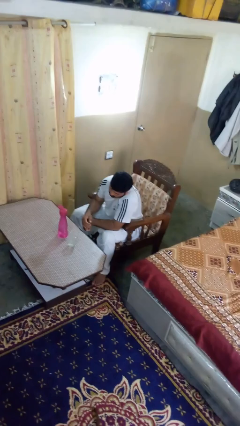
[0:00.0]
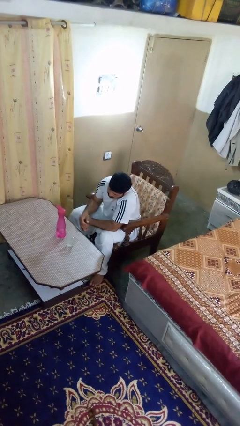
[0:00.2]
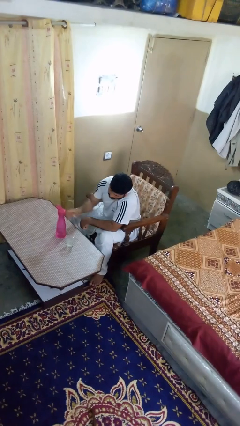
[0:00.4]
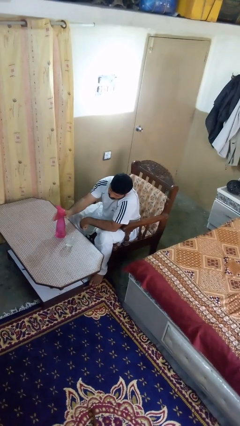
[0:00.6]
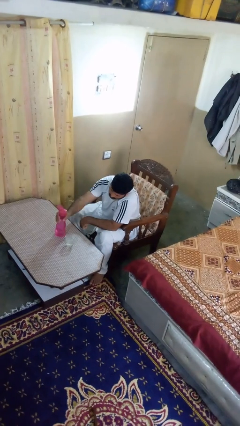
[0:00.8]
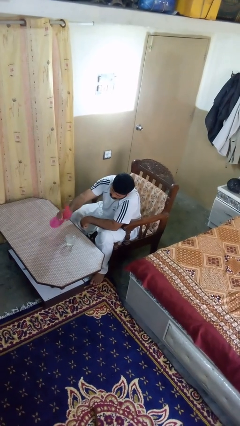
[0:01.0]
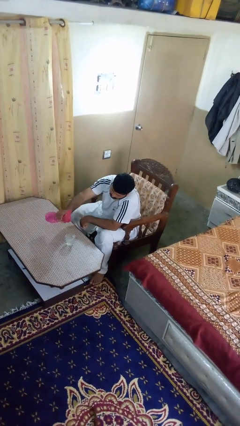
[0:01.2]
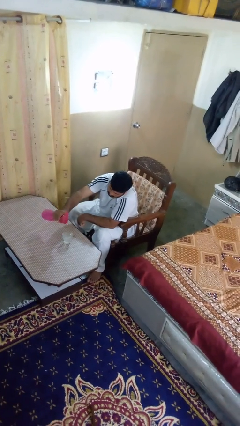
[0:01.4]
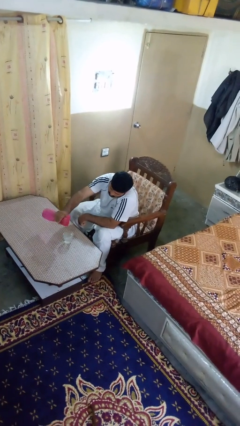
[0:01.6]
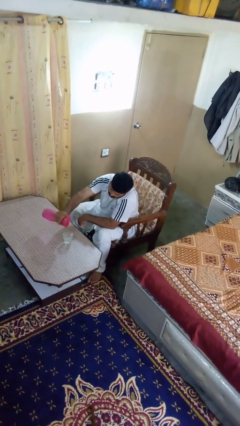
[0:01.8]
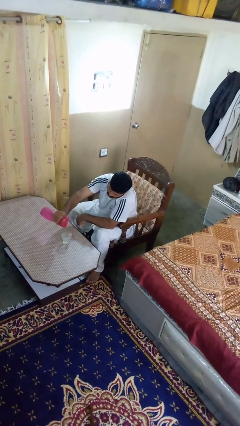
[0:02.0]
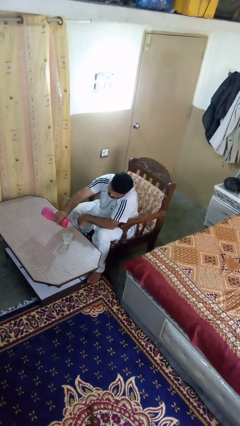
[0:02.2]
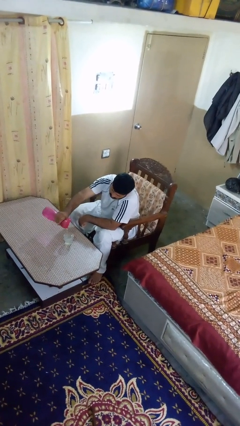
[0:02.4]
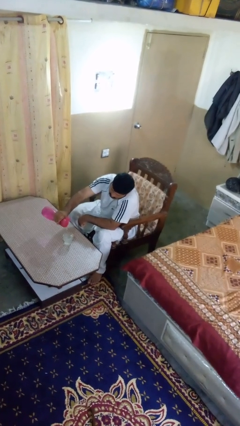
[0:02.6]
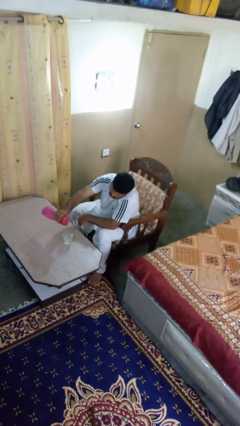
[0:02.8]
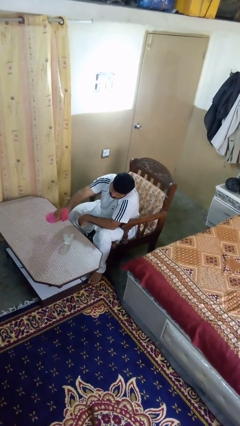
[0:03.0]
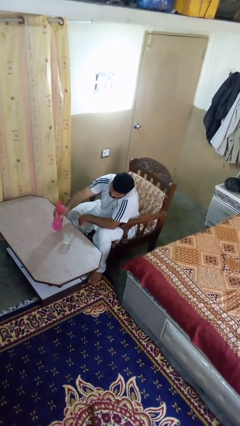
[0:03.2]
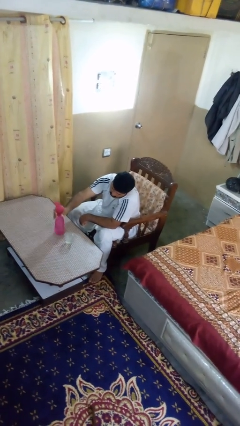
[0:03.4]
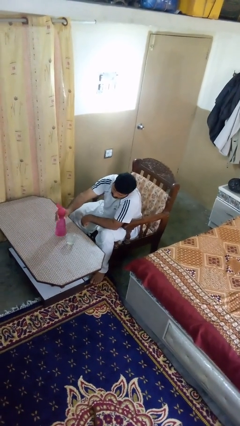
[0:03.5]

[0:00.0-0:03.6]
person pours liquid into cup

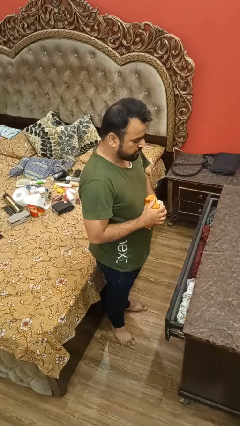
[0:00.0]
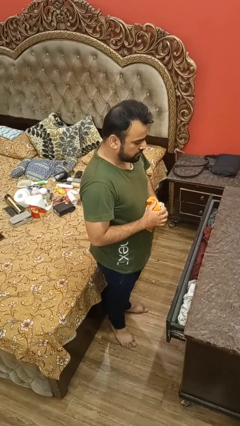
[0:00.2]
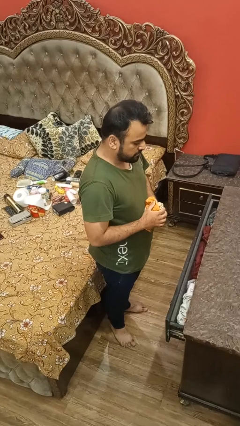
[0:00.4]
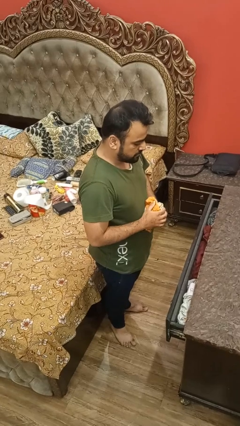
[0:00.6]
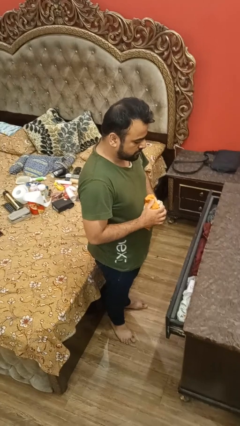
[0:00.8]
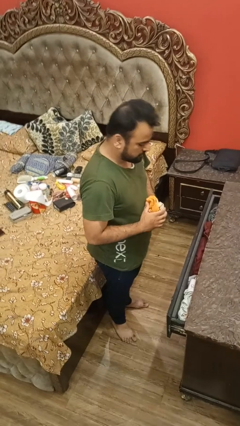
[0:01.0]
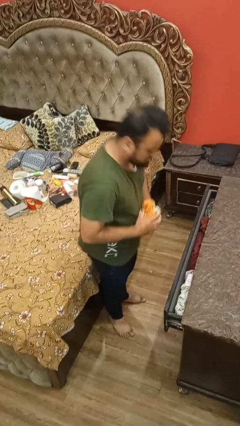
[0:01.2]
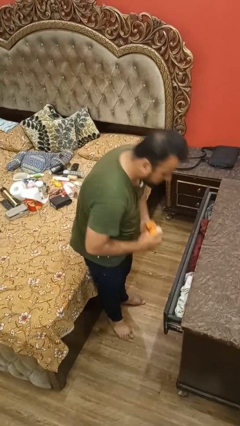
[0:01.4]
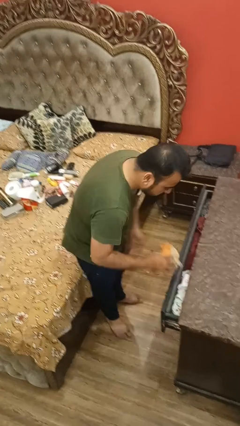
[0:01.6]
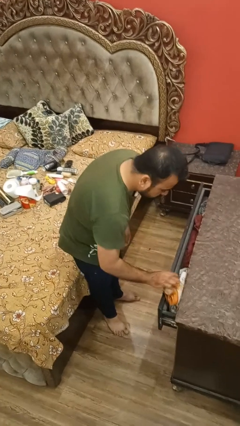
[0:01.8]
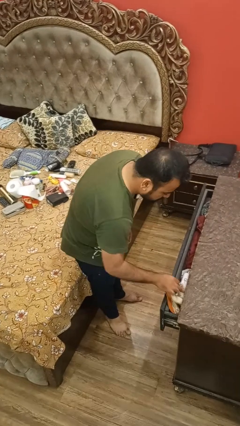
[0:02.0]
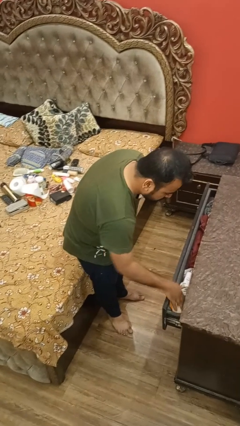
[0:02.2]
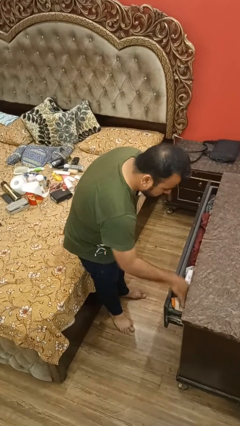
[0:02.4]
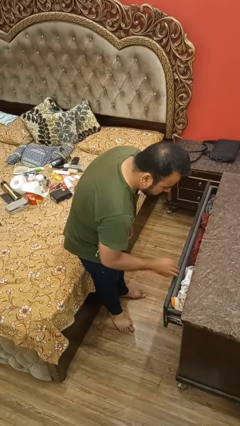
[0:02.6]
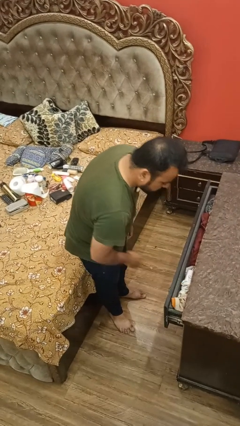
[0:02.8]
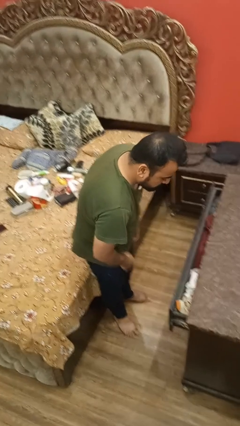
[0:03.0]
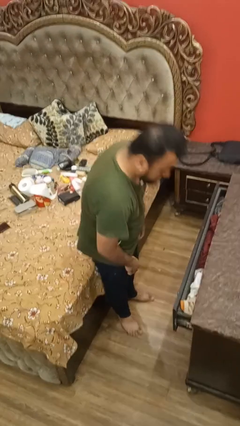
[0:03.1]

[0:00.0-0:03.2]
person puts clothes into dresser

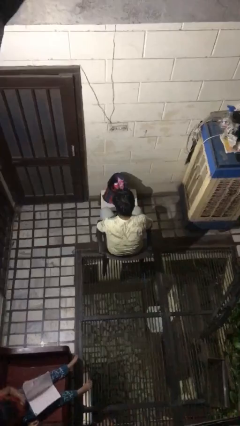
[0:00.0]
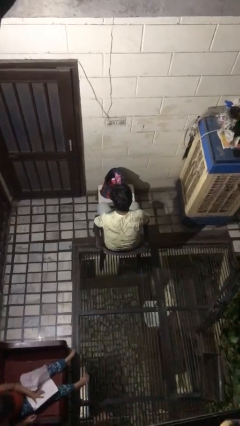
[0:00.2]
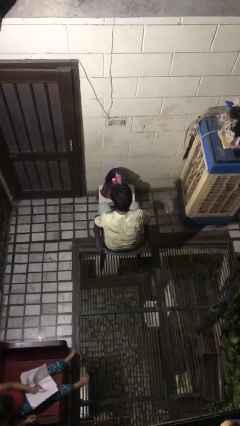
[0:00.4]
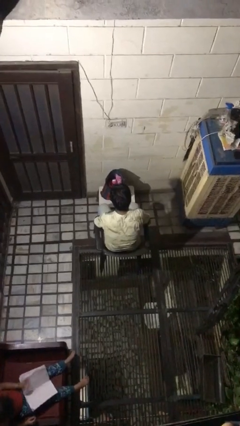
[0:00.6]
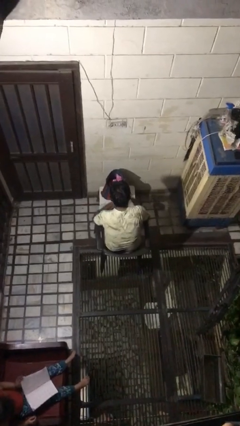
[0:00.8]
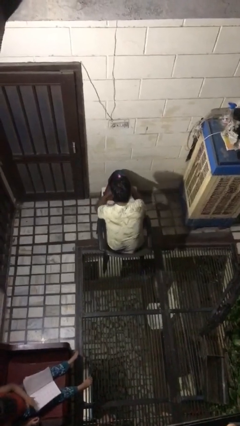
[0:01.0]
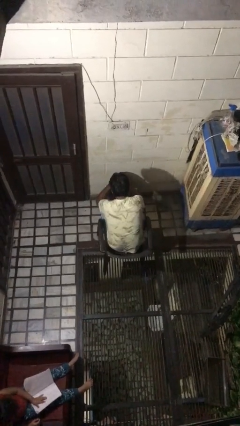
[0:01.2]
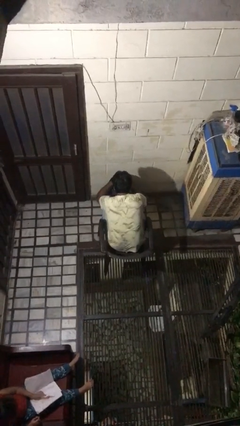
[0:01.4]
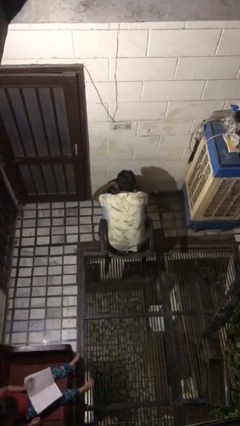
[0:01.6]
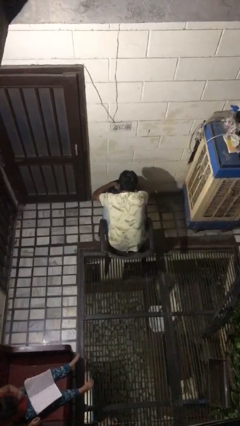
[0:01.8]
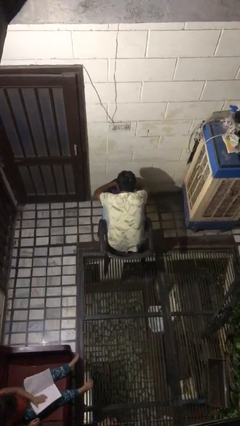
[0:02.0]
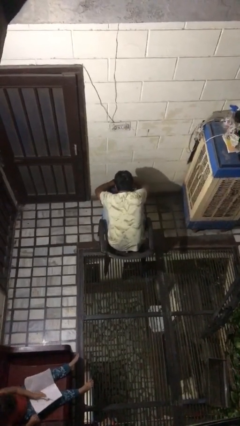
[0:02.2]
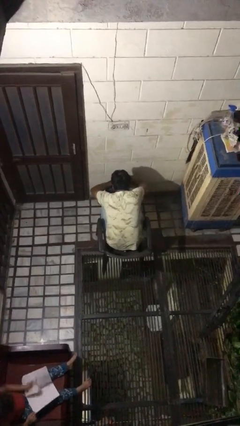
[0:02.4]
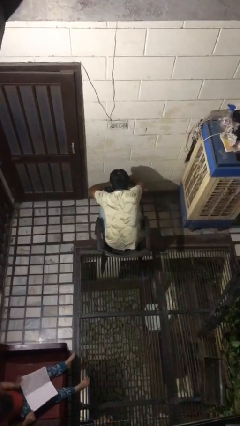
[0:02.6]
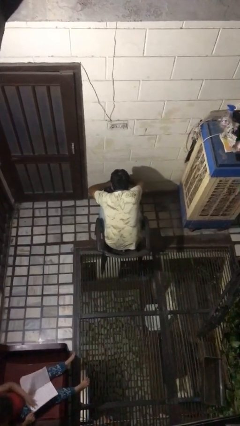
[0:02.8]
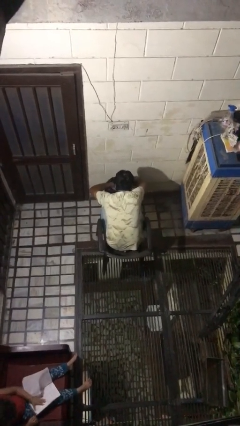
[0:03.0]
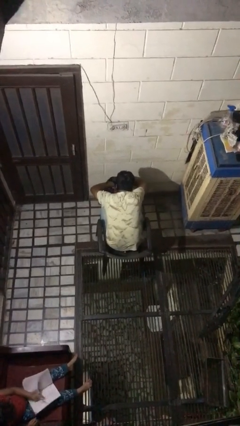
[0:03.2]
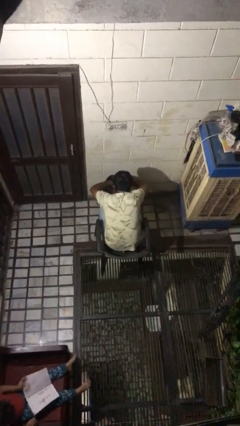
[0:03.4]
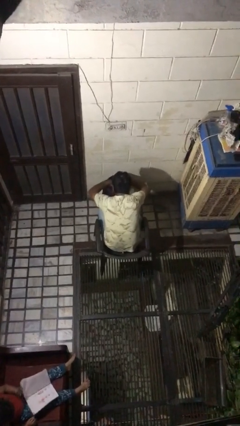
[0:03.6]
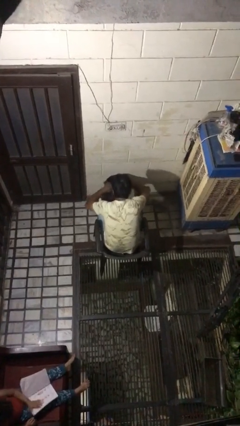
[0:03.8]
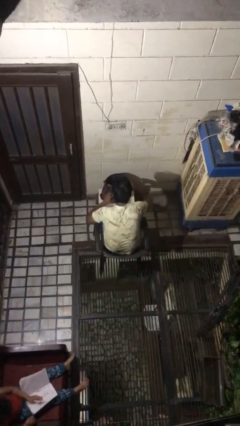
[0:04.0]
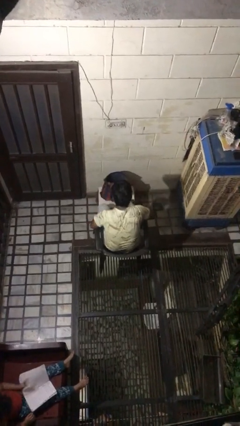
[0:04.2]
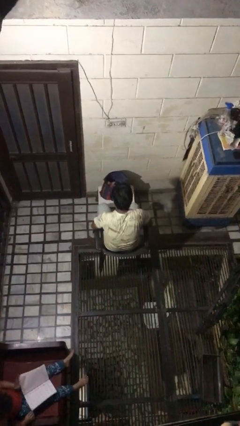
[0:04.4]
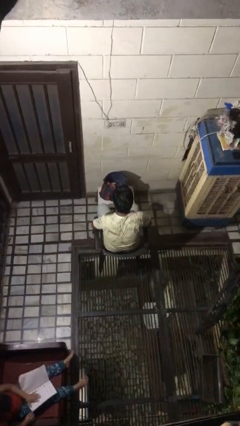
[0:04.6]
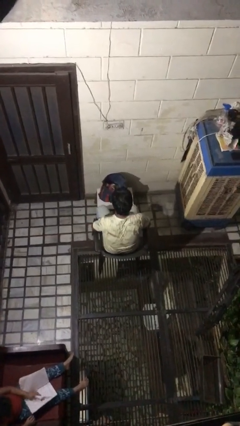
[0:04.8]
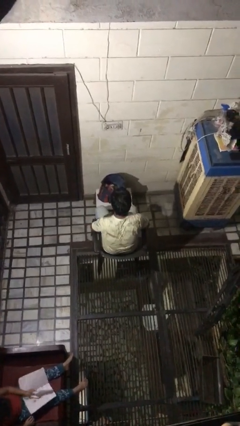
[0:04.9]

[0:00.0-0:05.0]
person searches in bag

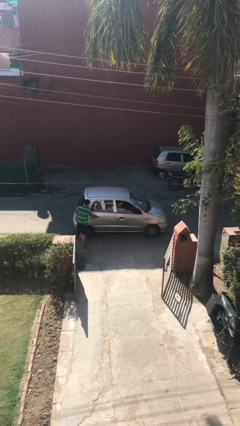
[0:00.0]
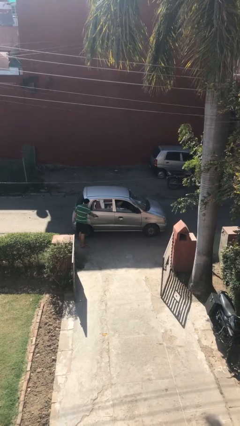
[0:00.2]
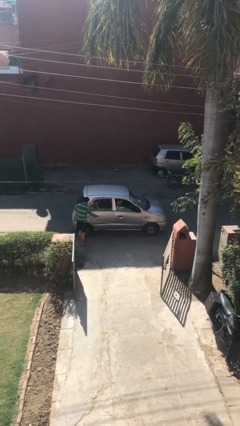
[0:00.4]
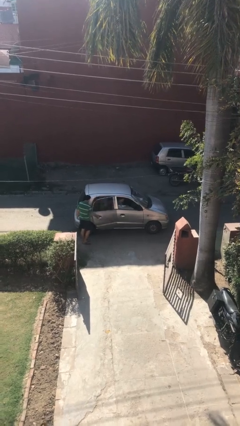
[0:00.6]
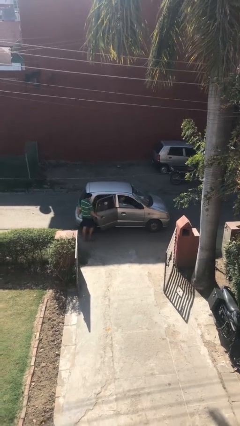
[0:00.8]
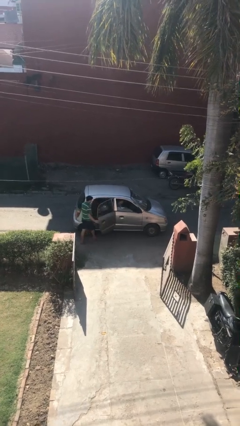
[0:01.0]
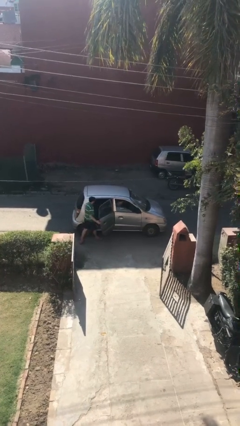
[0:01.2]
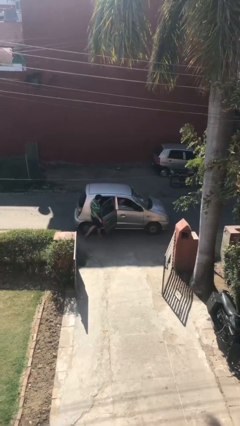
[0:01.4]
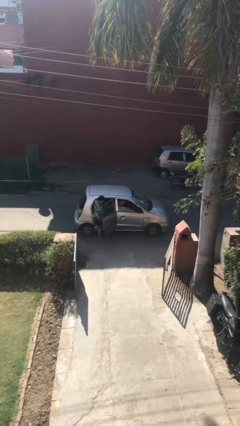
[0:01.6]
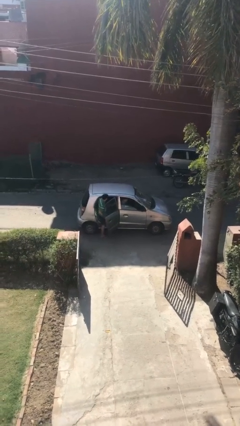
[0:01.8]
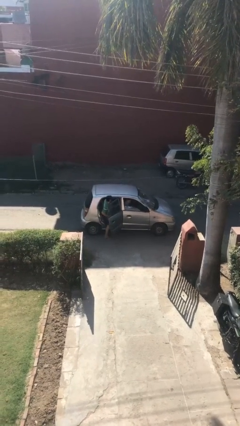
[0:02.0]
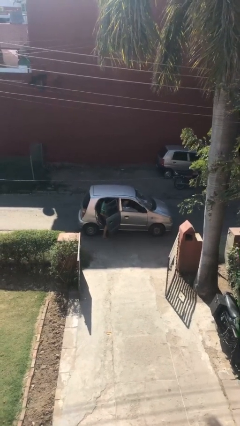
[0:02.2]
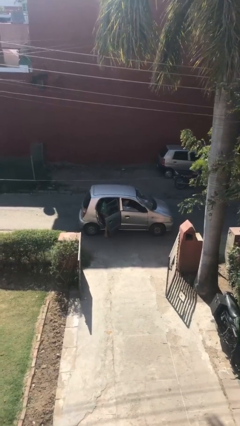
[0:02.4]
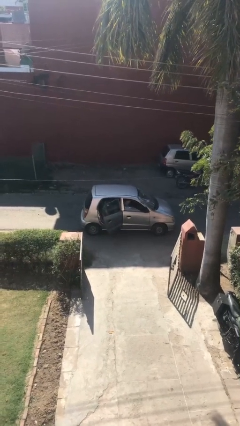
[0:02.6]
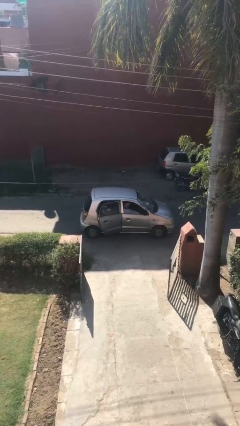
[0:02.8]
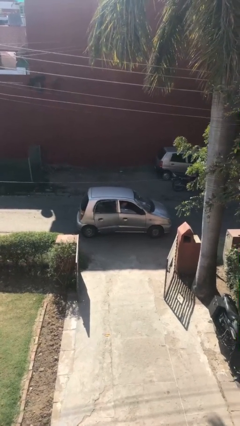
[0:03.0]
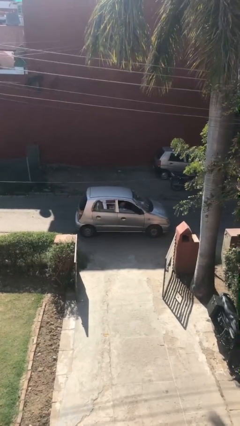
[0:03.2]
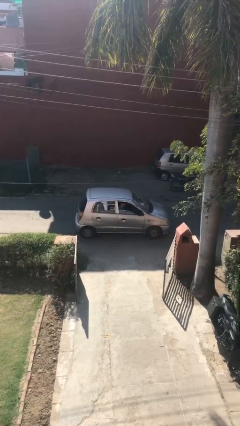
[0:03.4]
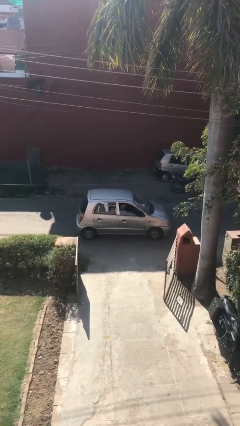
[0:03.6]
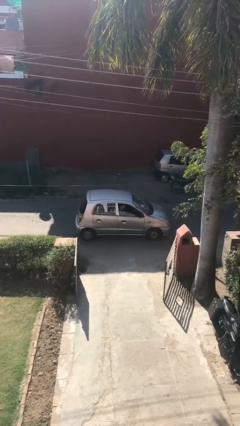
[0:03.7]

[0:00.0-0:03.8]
car picks up person

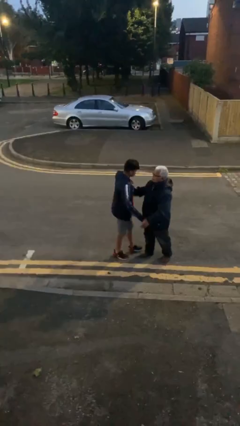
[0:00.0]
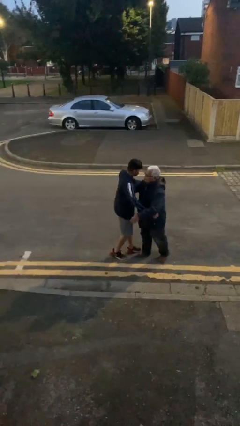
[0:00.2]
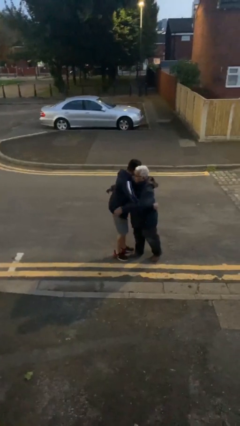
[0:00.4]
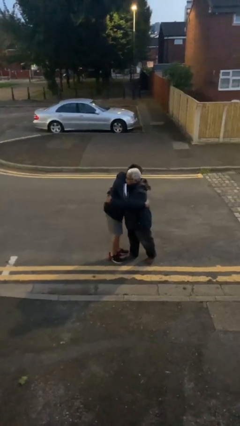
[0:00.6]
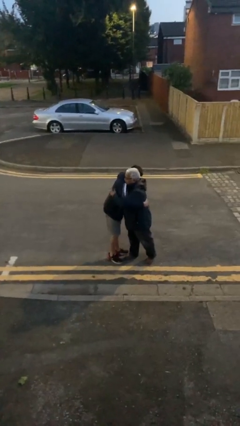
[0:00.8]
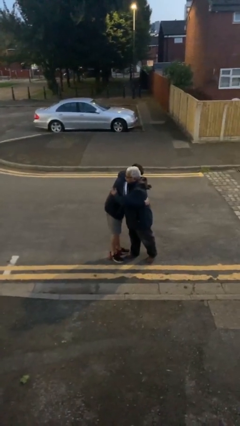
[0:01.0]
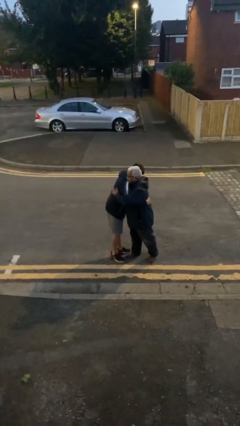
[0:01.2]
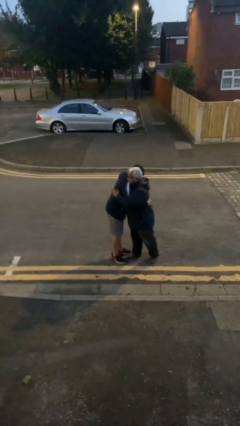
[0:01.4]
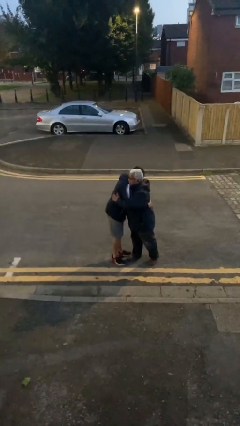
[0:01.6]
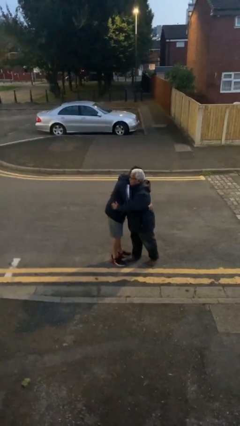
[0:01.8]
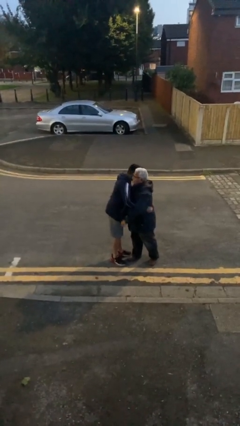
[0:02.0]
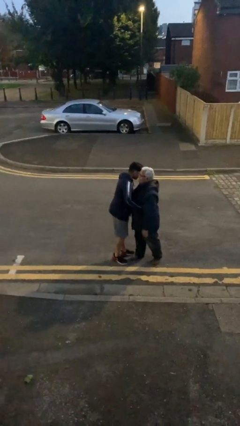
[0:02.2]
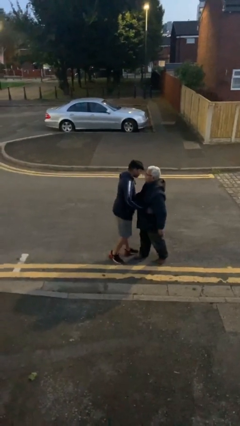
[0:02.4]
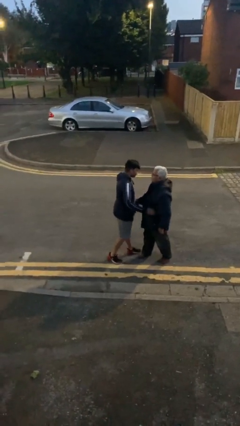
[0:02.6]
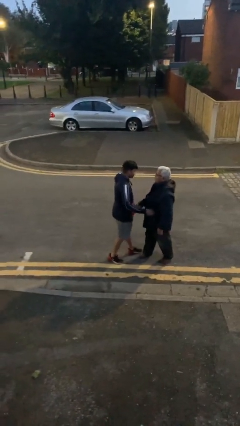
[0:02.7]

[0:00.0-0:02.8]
person embraces person
